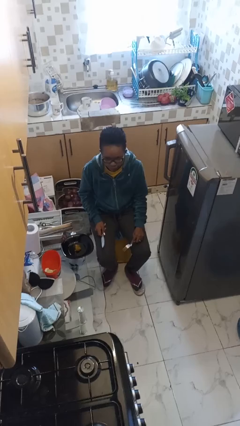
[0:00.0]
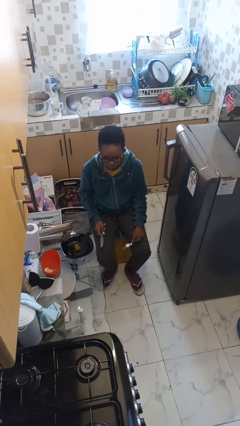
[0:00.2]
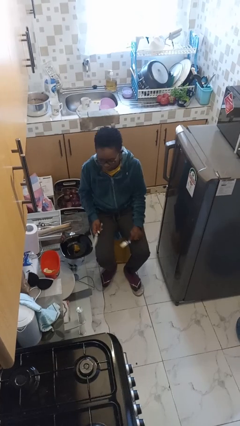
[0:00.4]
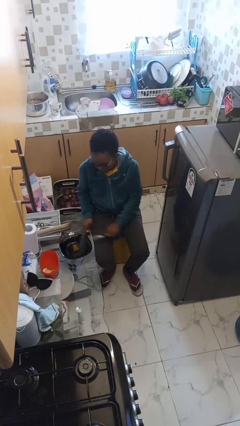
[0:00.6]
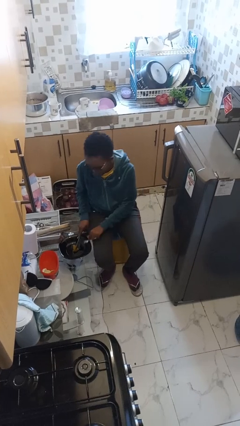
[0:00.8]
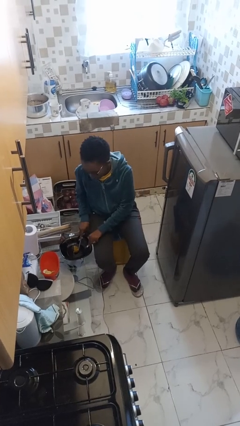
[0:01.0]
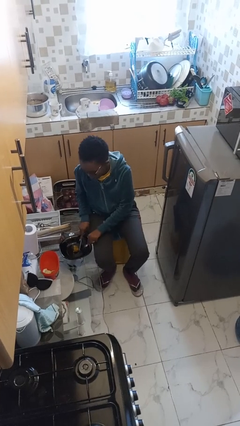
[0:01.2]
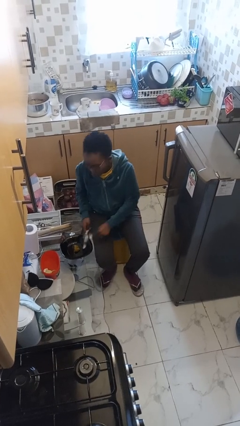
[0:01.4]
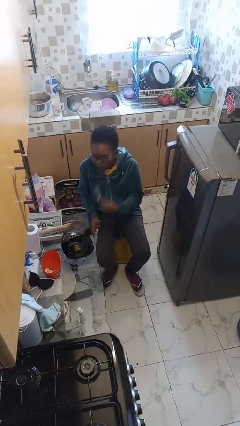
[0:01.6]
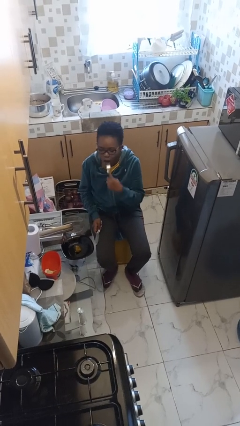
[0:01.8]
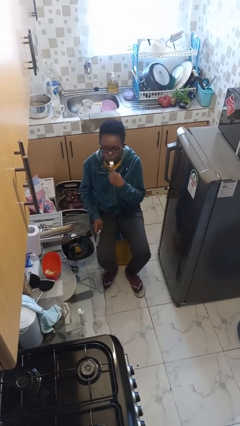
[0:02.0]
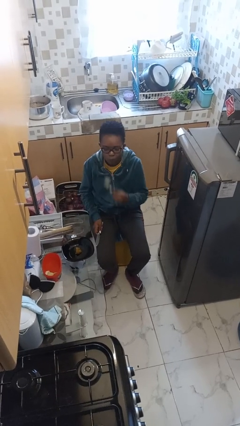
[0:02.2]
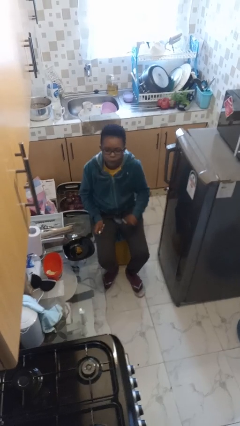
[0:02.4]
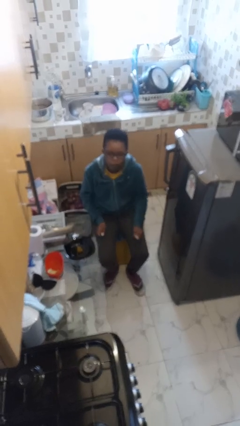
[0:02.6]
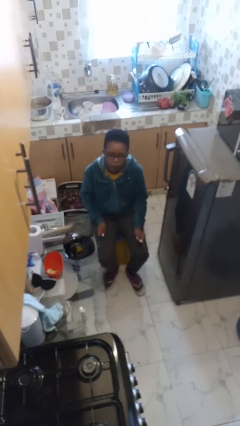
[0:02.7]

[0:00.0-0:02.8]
person eats with utensil

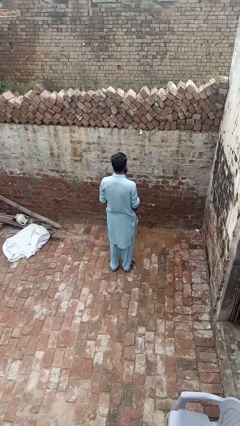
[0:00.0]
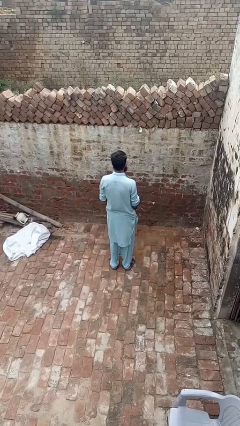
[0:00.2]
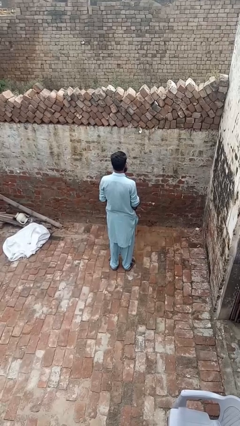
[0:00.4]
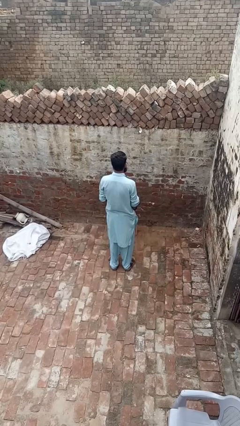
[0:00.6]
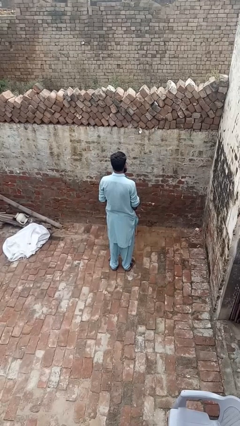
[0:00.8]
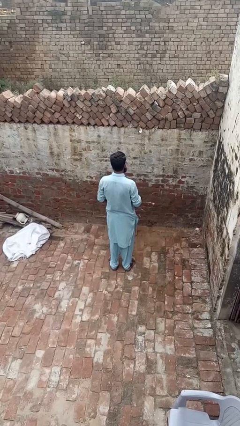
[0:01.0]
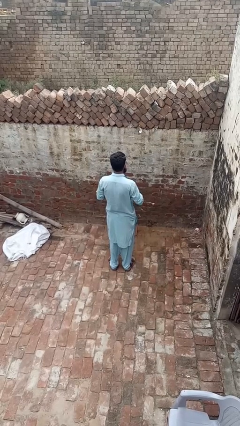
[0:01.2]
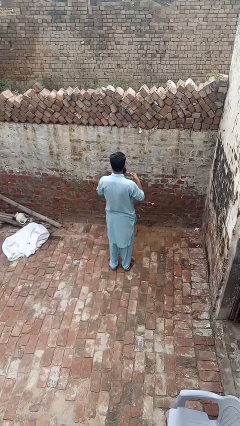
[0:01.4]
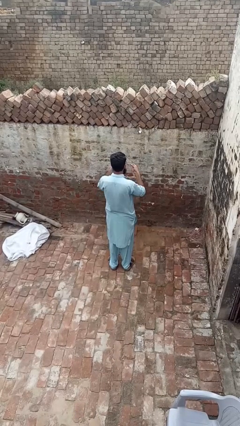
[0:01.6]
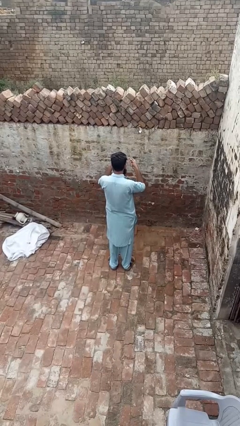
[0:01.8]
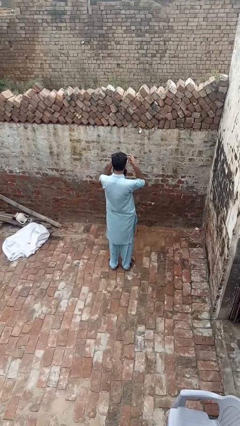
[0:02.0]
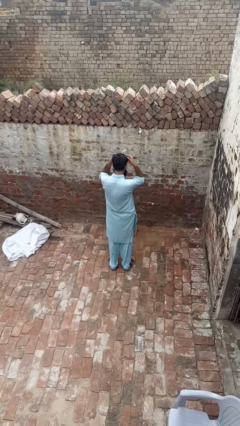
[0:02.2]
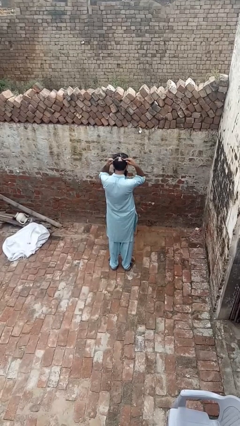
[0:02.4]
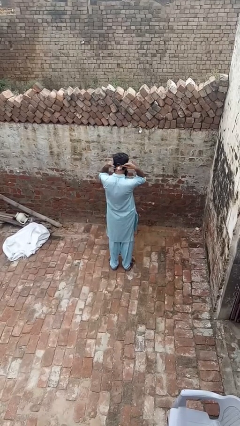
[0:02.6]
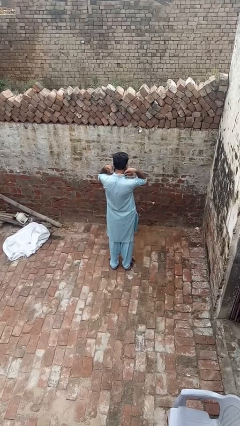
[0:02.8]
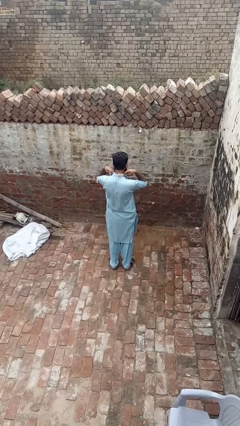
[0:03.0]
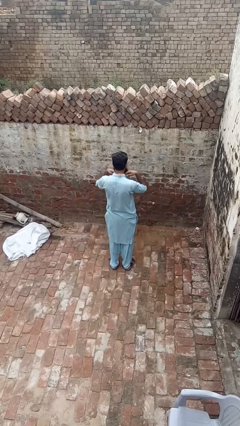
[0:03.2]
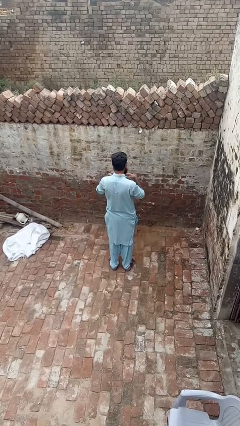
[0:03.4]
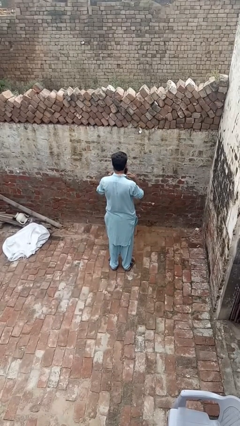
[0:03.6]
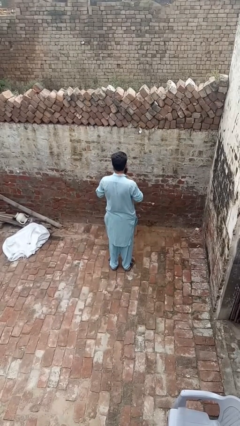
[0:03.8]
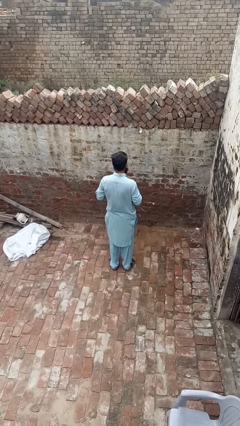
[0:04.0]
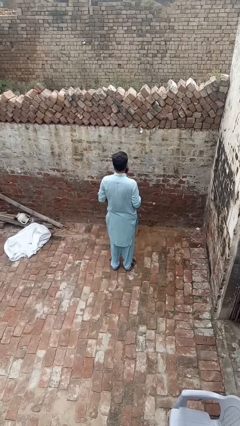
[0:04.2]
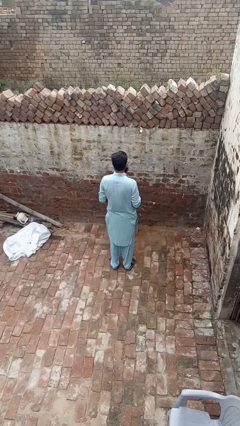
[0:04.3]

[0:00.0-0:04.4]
person puts on necklace

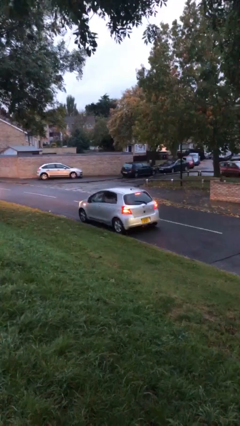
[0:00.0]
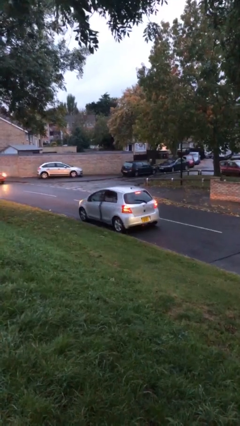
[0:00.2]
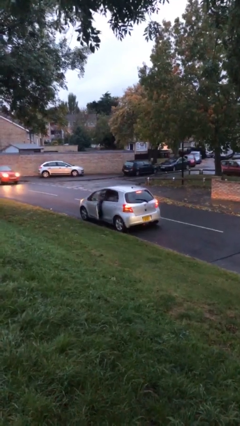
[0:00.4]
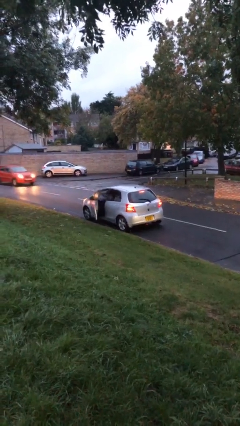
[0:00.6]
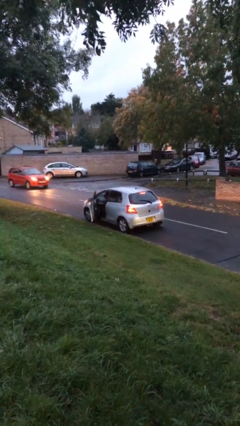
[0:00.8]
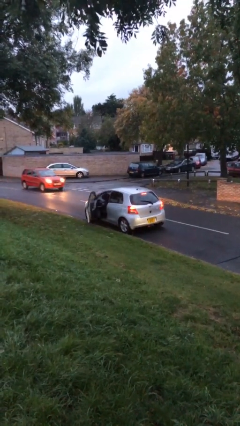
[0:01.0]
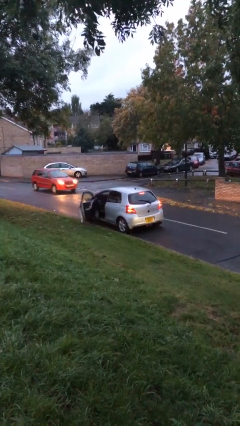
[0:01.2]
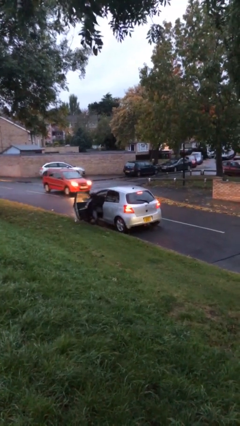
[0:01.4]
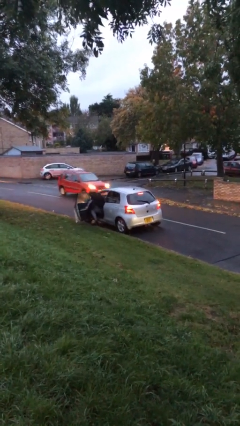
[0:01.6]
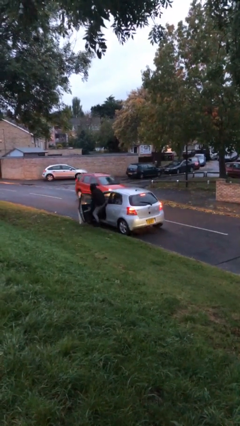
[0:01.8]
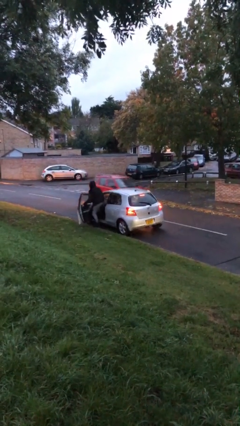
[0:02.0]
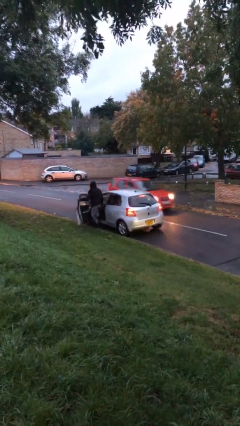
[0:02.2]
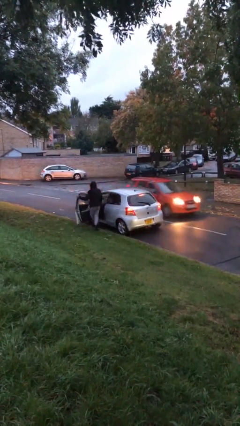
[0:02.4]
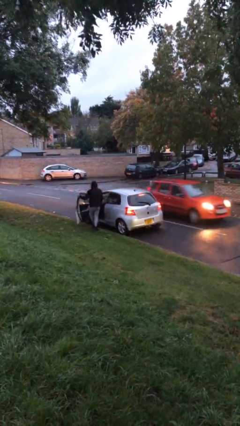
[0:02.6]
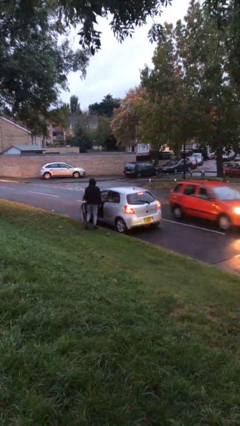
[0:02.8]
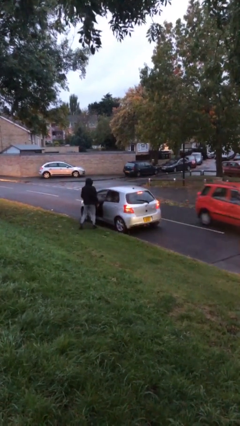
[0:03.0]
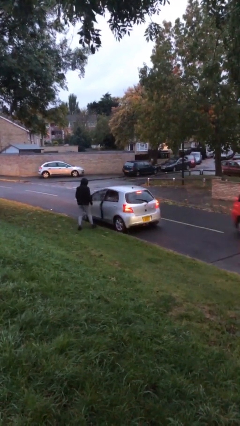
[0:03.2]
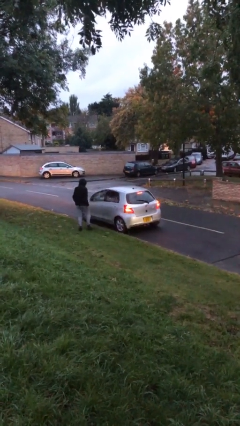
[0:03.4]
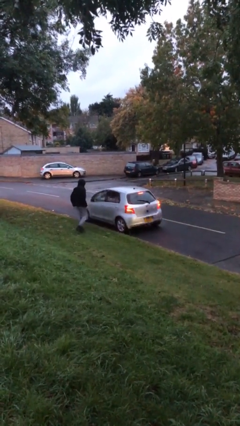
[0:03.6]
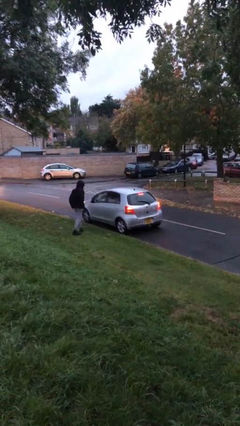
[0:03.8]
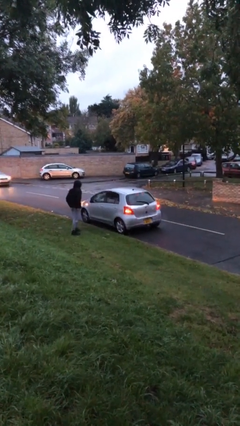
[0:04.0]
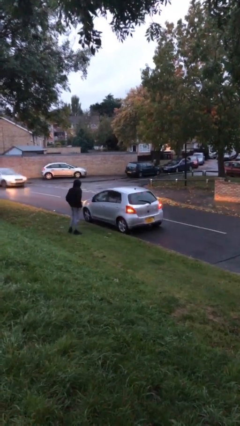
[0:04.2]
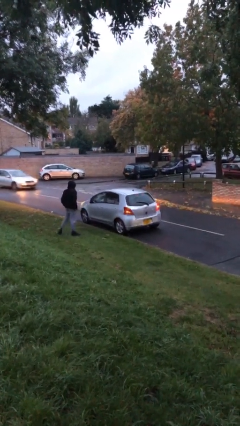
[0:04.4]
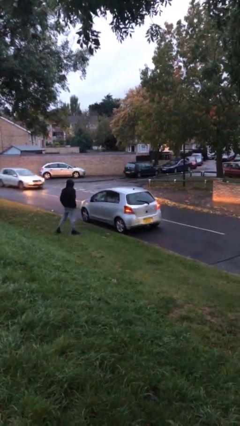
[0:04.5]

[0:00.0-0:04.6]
car drops off person

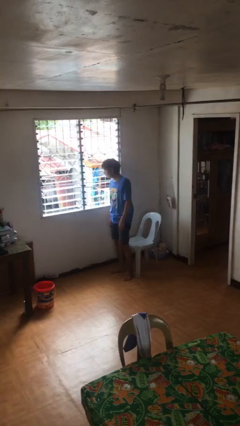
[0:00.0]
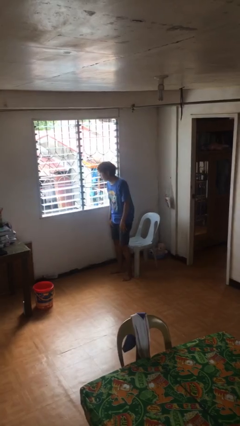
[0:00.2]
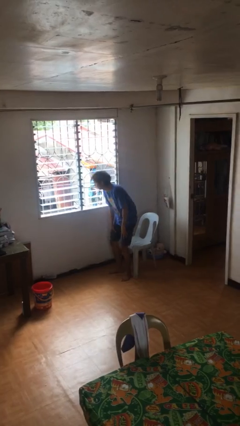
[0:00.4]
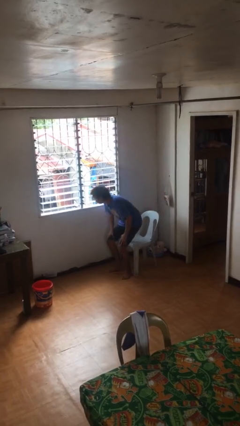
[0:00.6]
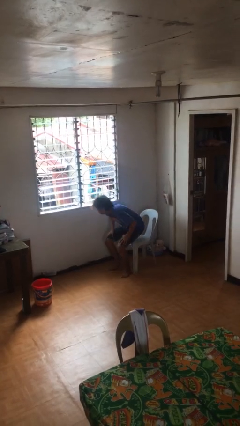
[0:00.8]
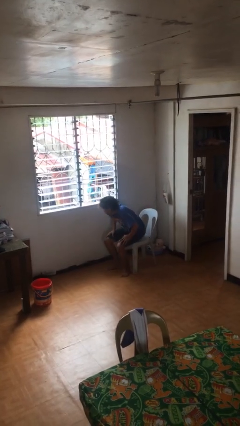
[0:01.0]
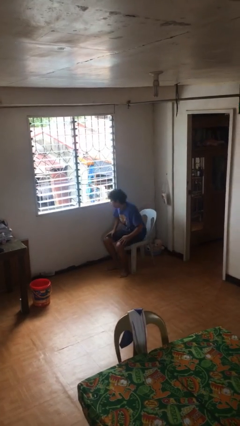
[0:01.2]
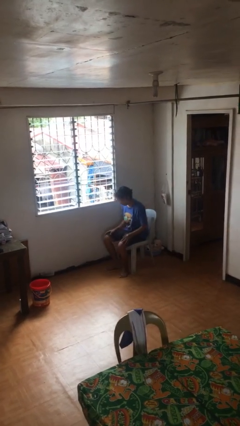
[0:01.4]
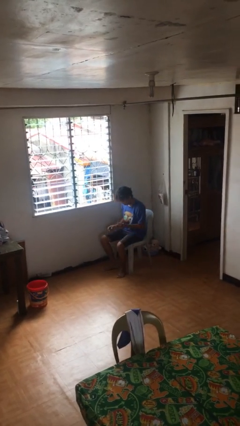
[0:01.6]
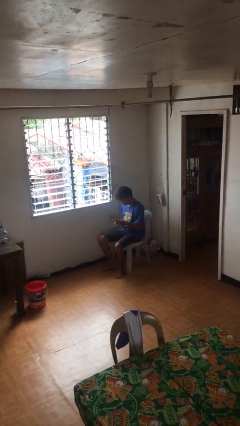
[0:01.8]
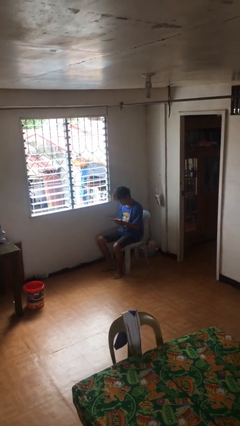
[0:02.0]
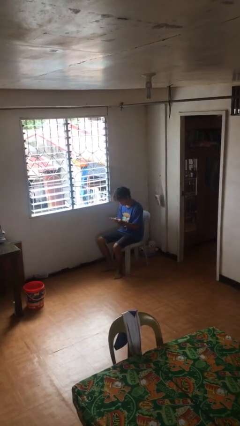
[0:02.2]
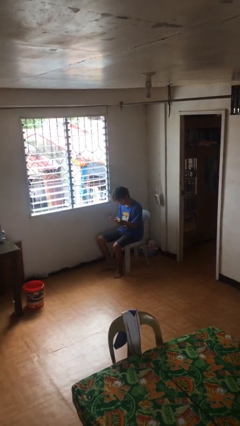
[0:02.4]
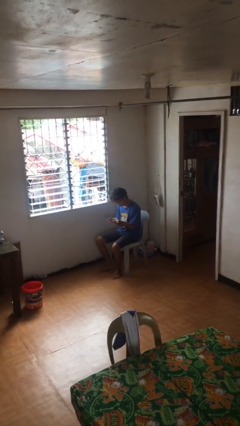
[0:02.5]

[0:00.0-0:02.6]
person sits down

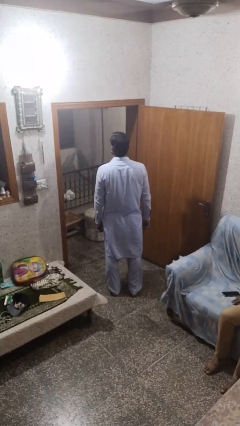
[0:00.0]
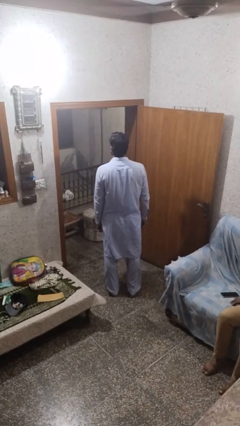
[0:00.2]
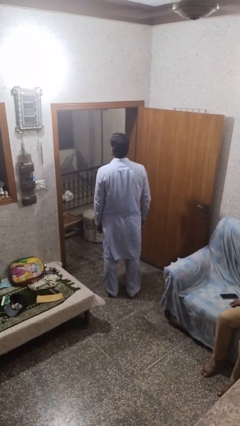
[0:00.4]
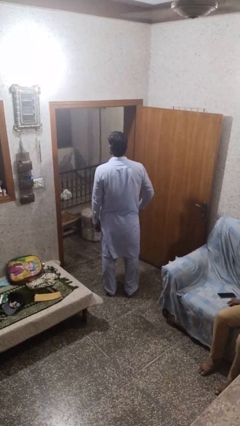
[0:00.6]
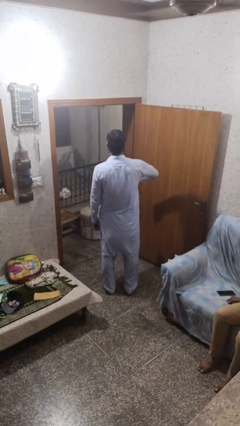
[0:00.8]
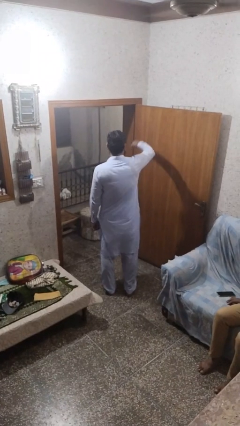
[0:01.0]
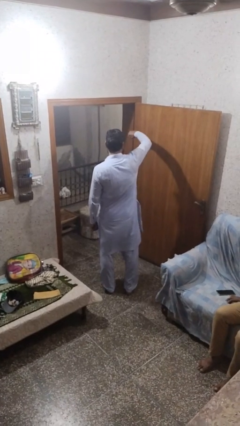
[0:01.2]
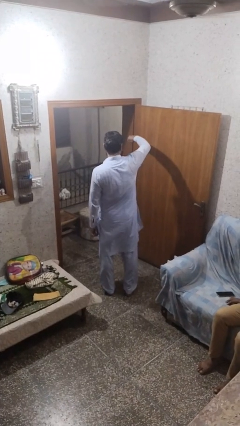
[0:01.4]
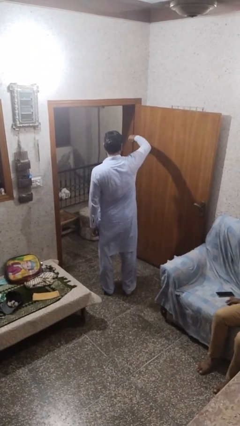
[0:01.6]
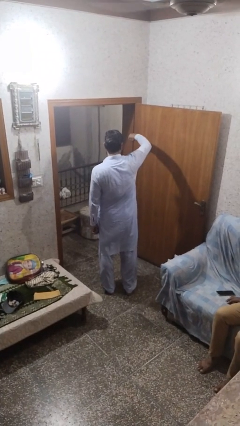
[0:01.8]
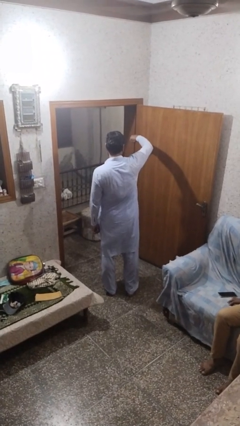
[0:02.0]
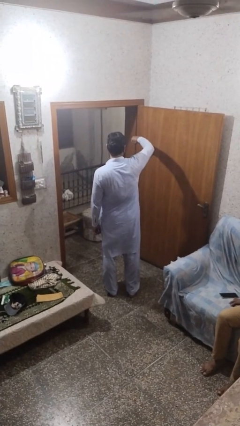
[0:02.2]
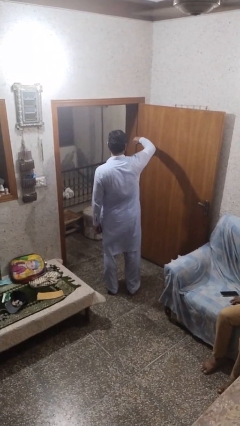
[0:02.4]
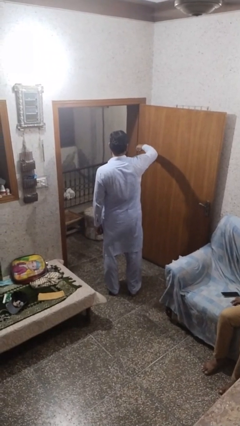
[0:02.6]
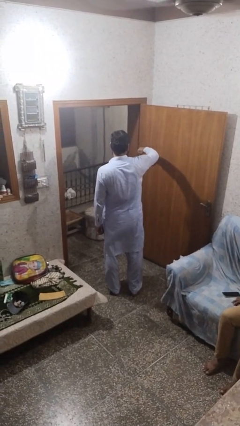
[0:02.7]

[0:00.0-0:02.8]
person karate chop
